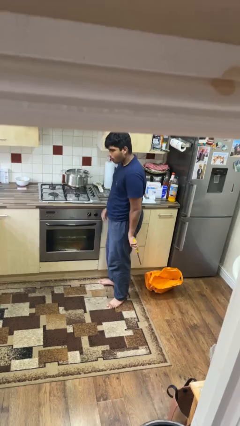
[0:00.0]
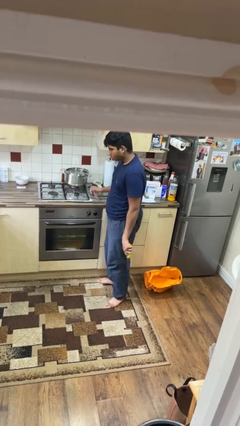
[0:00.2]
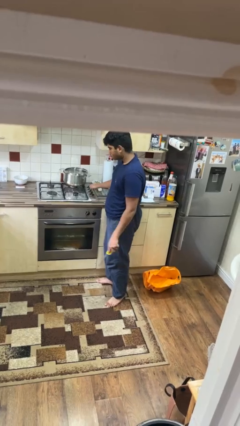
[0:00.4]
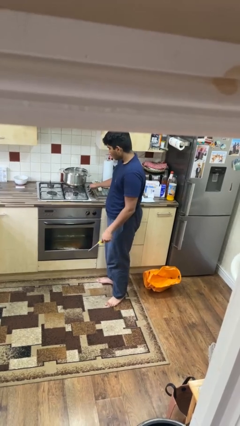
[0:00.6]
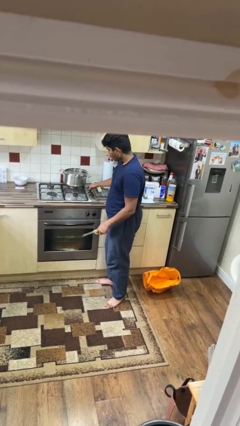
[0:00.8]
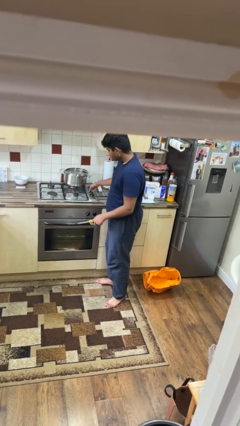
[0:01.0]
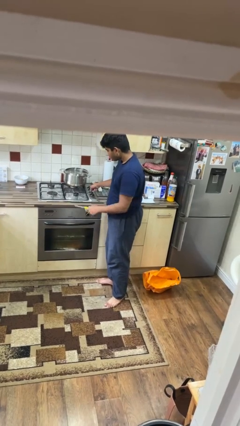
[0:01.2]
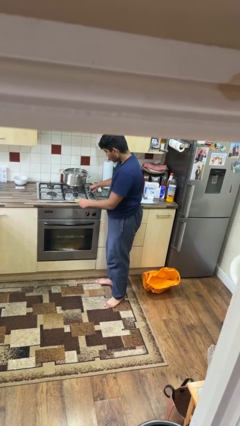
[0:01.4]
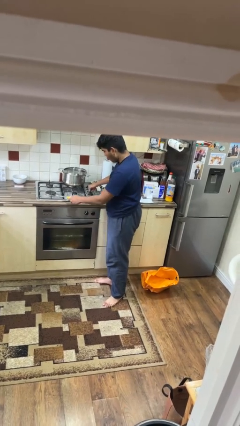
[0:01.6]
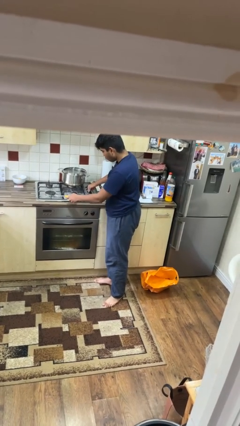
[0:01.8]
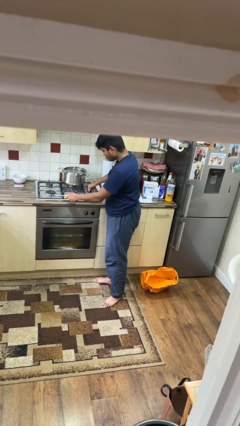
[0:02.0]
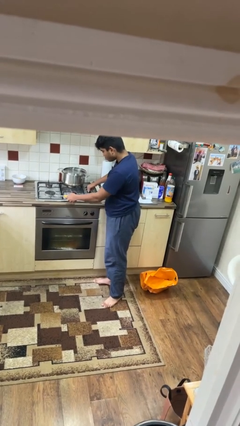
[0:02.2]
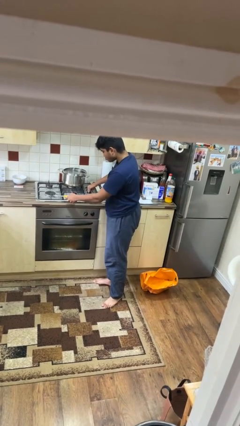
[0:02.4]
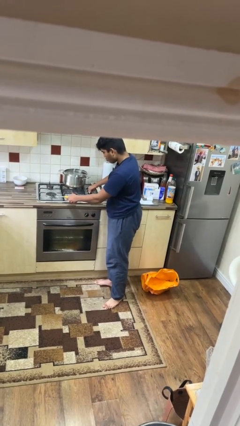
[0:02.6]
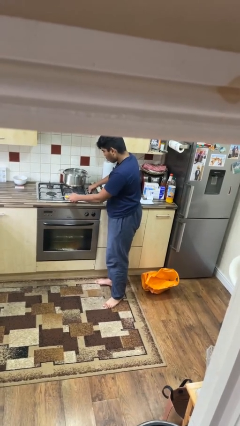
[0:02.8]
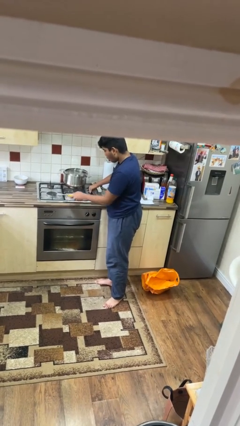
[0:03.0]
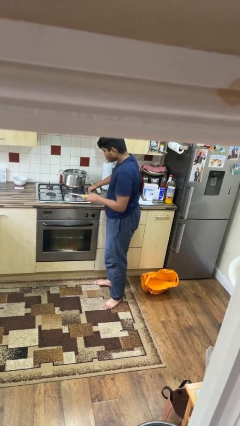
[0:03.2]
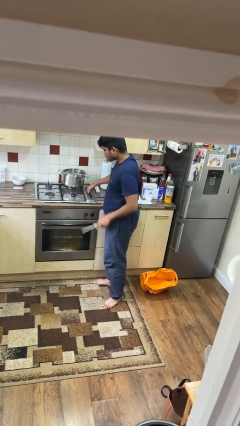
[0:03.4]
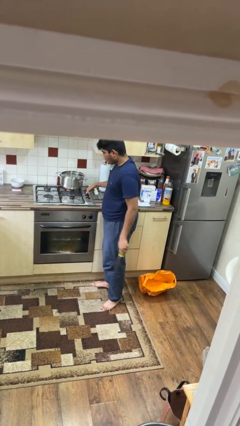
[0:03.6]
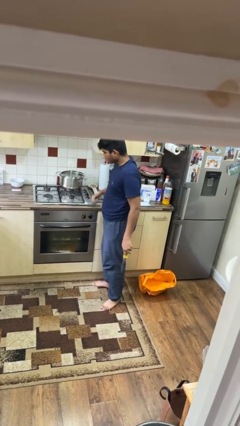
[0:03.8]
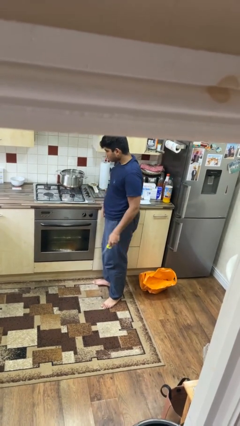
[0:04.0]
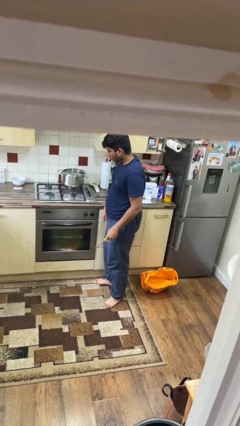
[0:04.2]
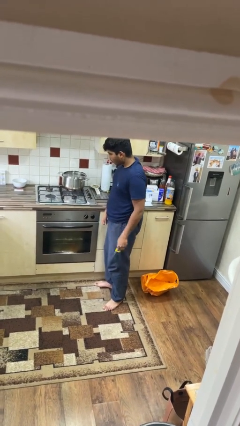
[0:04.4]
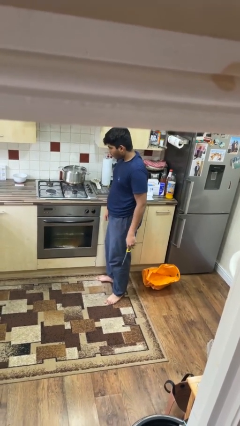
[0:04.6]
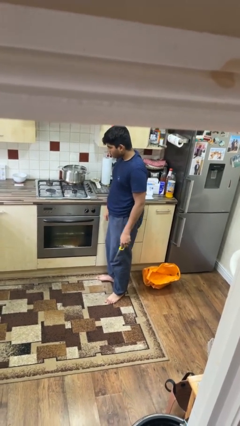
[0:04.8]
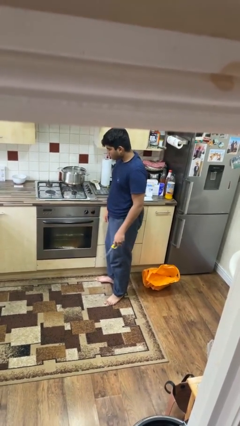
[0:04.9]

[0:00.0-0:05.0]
person turns on stovetop

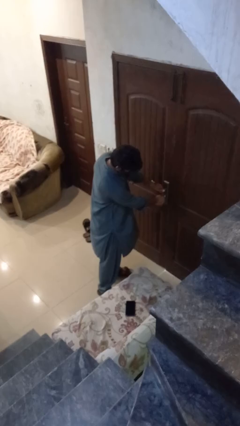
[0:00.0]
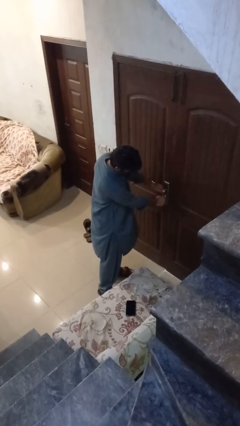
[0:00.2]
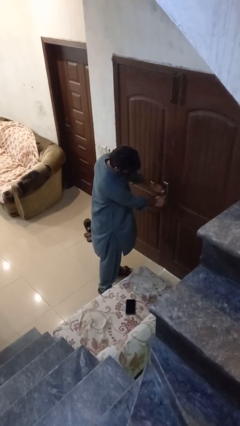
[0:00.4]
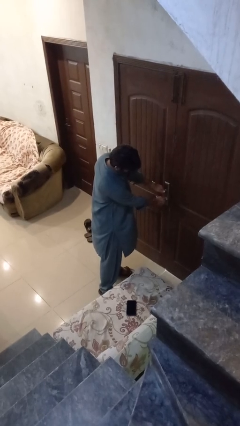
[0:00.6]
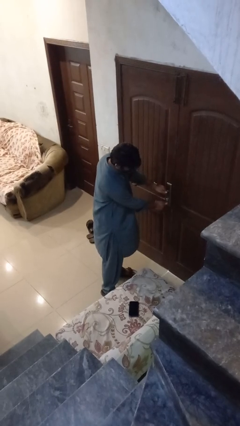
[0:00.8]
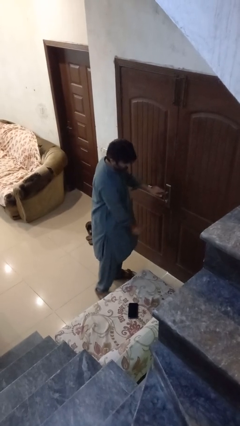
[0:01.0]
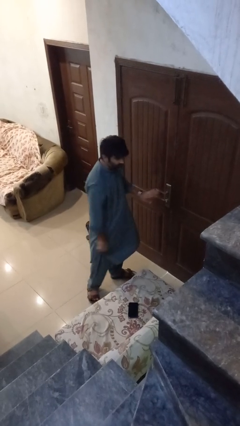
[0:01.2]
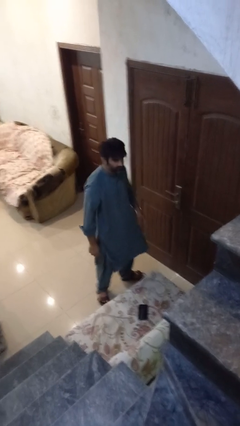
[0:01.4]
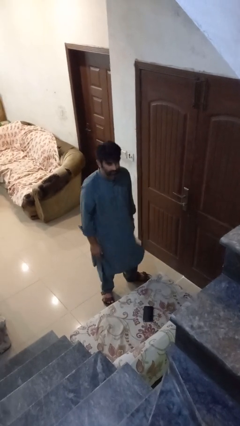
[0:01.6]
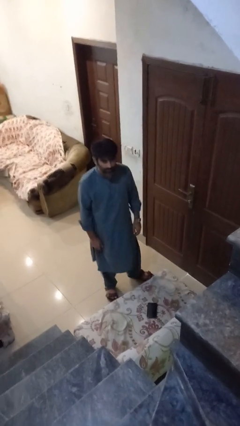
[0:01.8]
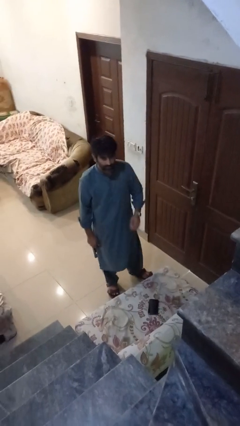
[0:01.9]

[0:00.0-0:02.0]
person locks door with keys

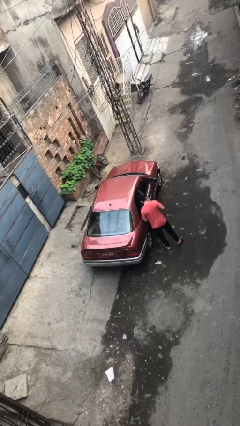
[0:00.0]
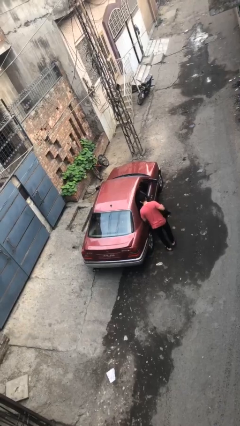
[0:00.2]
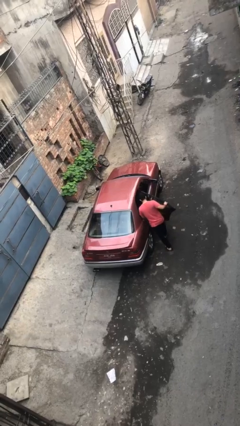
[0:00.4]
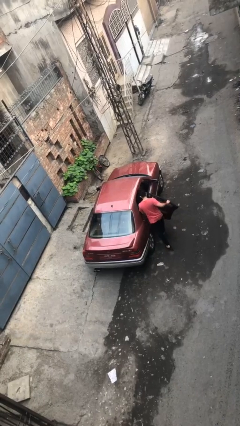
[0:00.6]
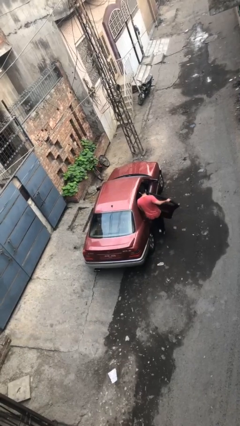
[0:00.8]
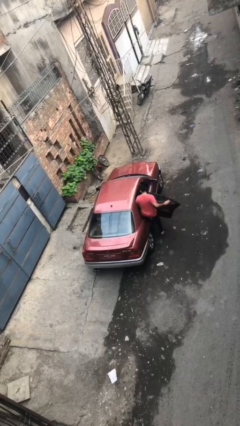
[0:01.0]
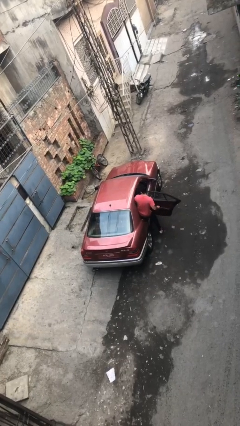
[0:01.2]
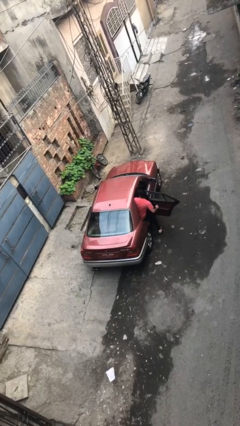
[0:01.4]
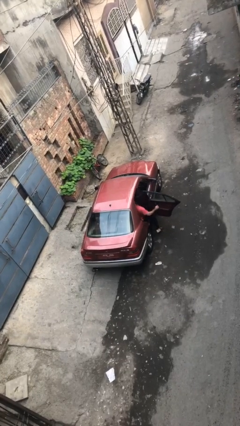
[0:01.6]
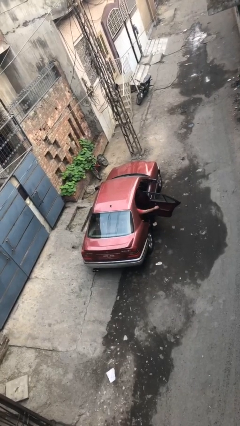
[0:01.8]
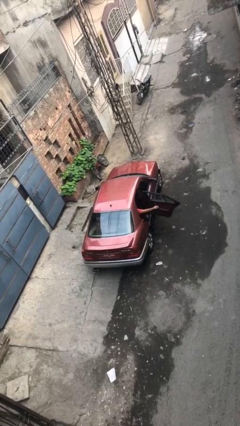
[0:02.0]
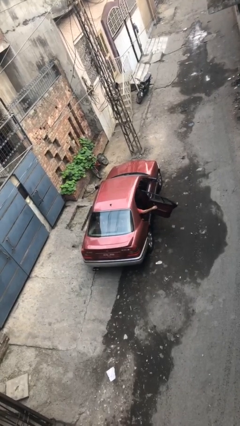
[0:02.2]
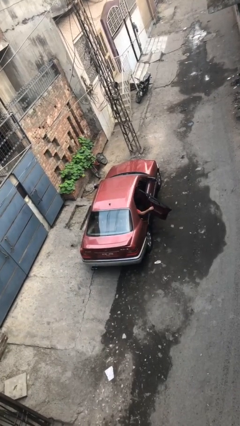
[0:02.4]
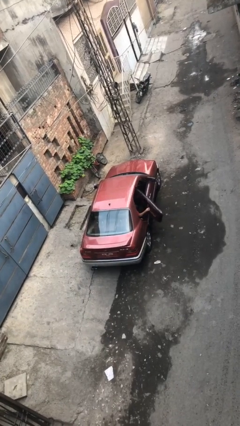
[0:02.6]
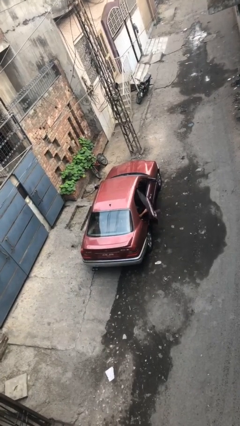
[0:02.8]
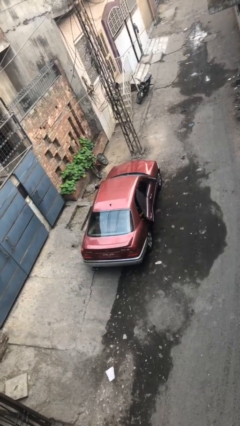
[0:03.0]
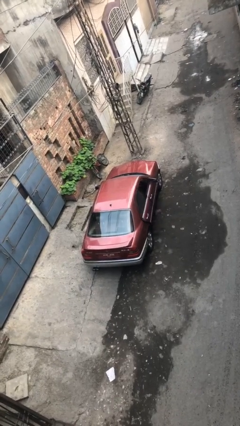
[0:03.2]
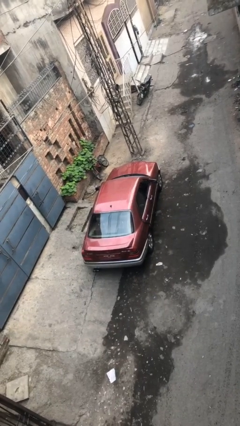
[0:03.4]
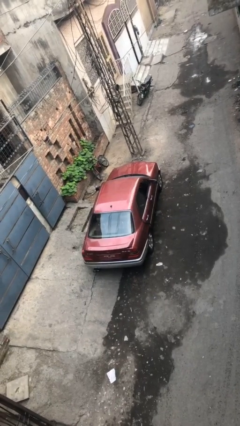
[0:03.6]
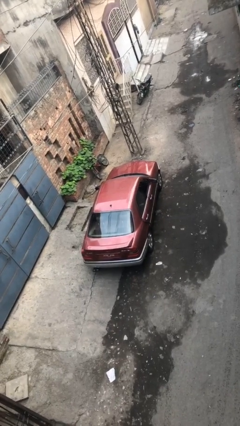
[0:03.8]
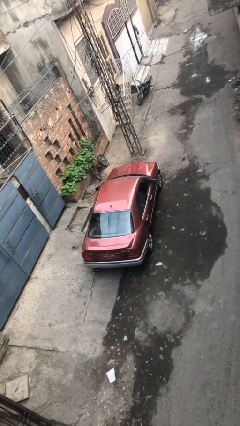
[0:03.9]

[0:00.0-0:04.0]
car picks up person

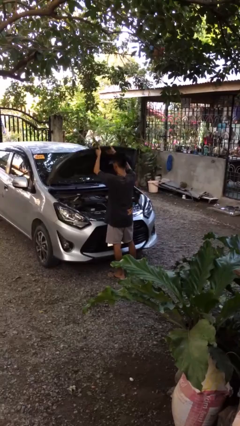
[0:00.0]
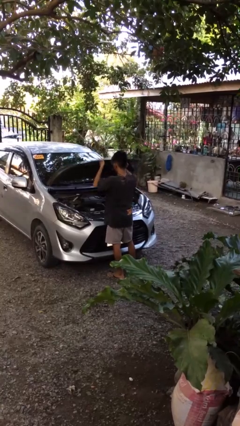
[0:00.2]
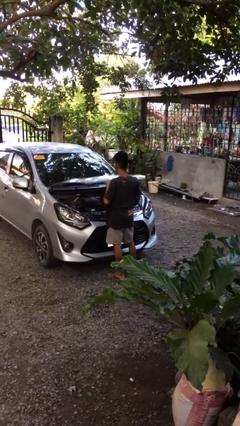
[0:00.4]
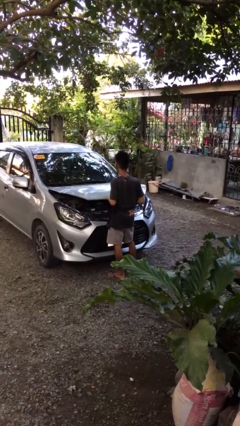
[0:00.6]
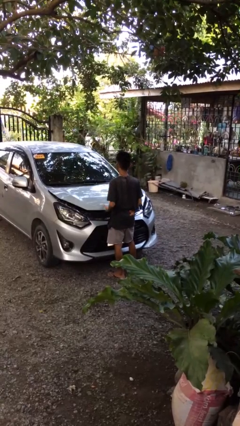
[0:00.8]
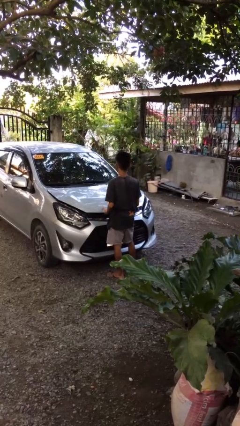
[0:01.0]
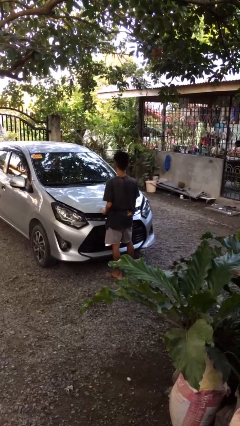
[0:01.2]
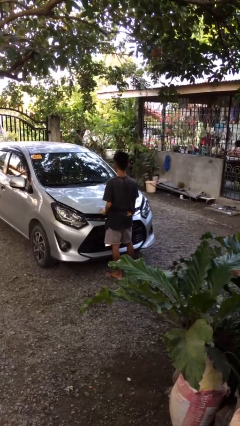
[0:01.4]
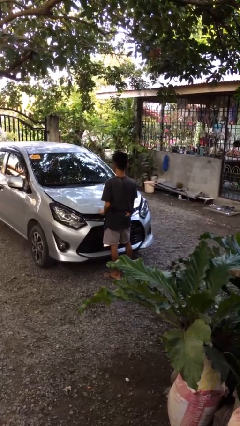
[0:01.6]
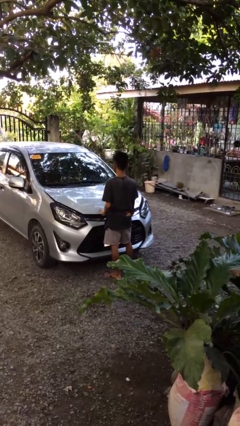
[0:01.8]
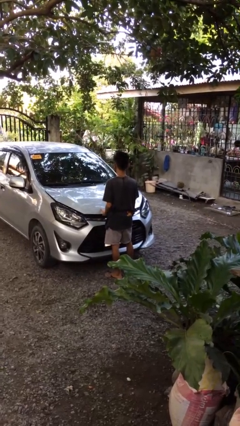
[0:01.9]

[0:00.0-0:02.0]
person closes car hood

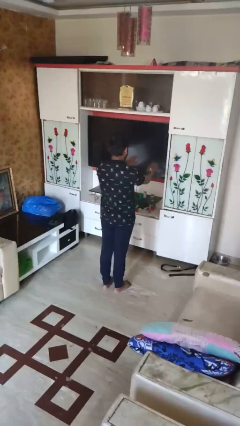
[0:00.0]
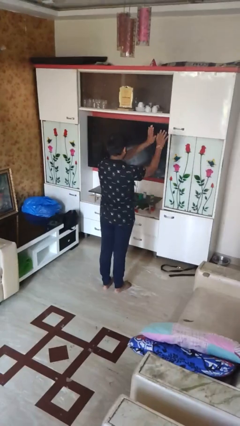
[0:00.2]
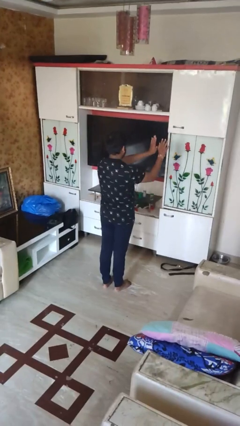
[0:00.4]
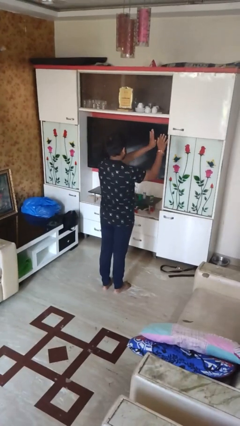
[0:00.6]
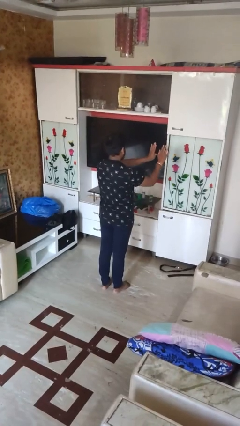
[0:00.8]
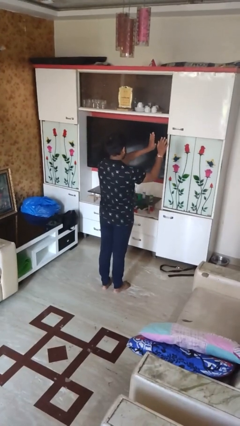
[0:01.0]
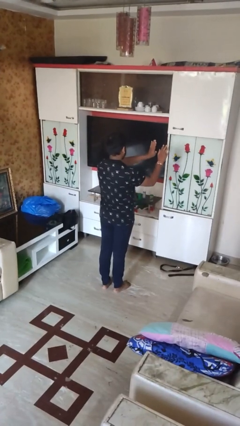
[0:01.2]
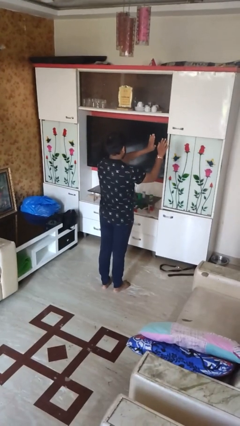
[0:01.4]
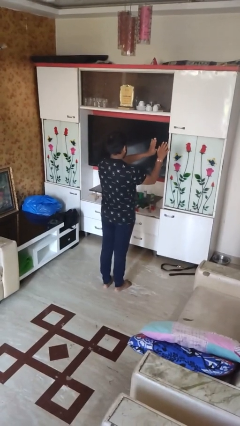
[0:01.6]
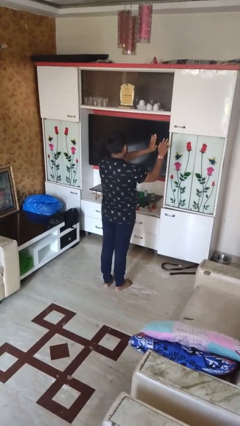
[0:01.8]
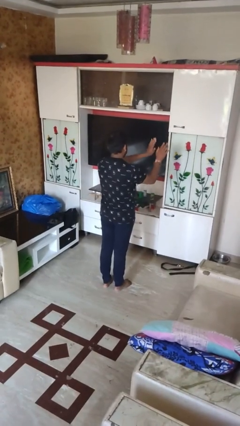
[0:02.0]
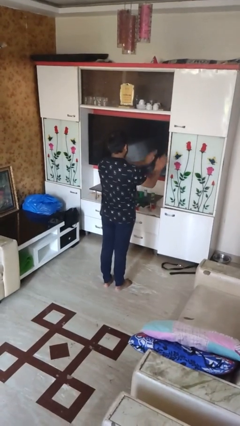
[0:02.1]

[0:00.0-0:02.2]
person dances in place

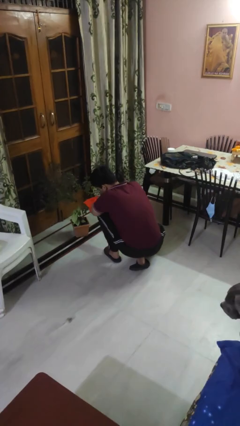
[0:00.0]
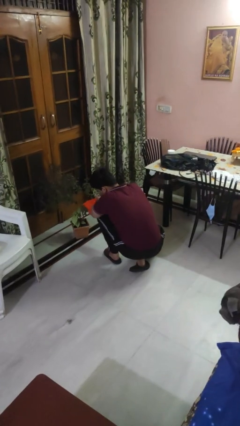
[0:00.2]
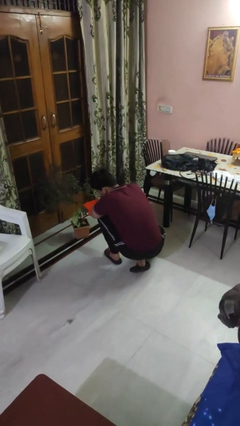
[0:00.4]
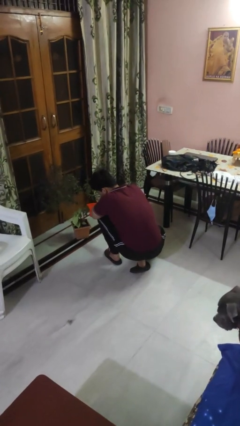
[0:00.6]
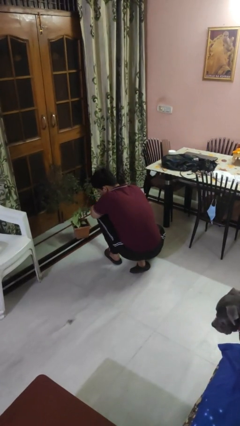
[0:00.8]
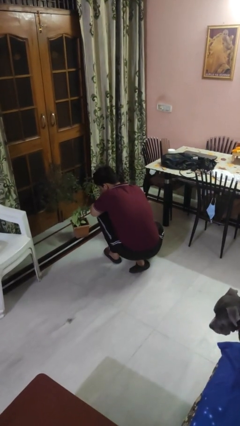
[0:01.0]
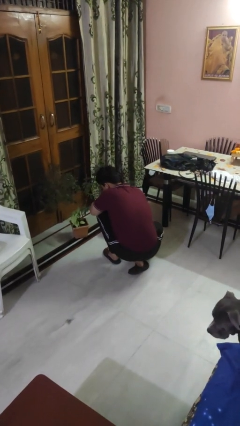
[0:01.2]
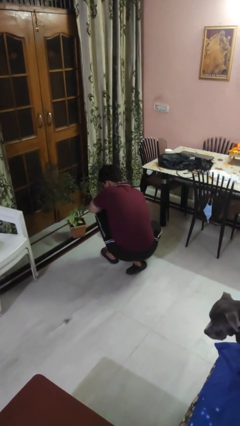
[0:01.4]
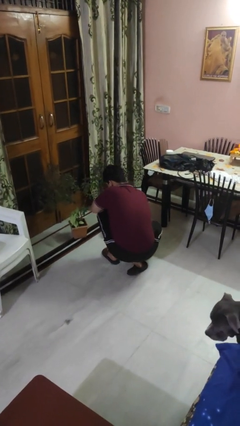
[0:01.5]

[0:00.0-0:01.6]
person waters houseplant

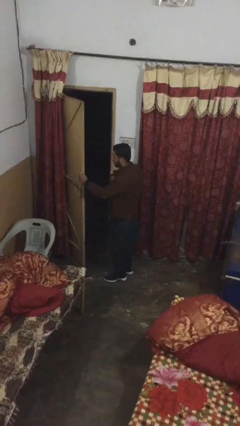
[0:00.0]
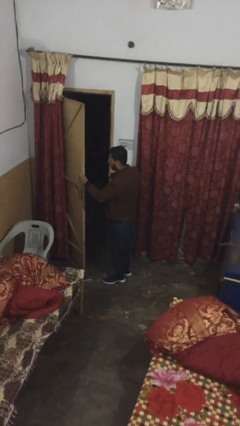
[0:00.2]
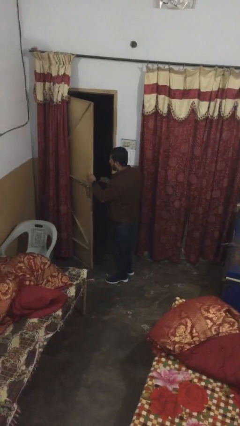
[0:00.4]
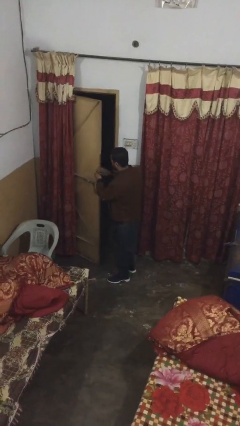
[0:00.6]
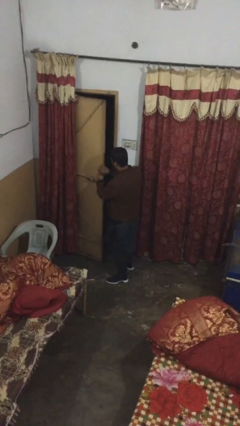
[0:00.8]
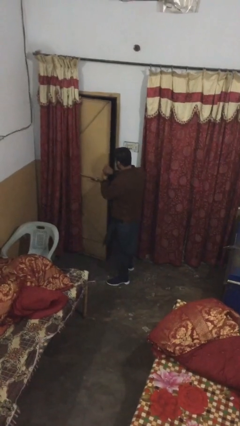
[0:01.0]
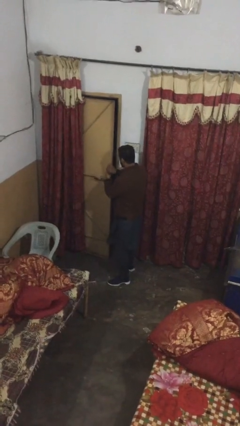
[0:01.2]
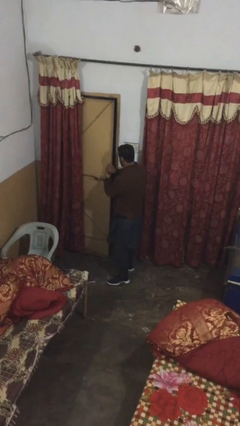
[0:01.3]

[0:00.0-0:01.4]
person closes facility door
